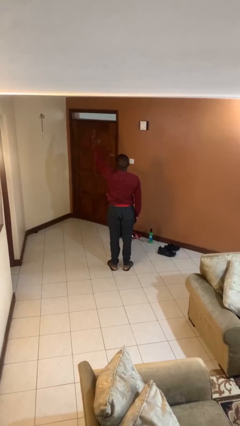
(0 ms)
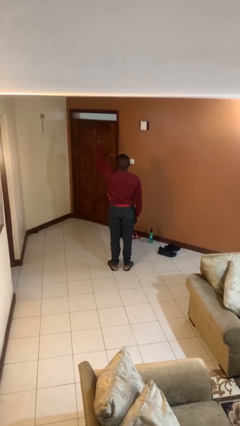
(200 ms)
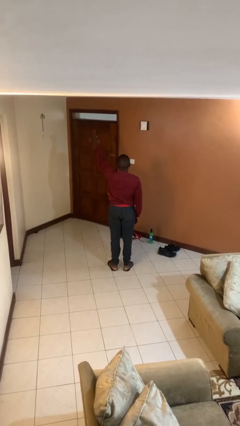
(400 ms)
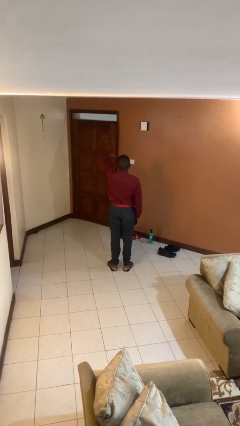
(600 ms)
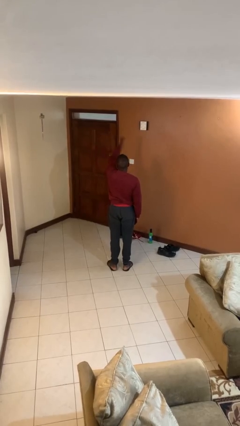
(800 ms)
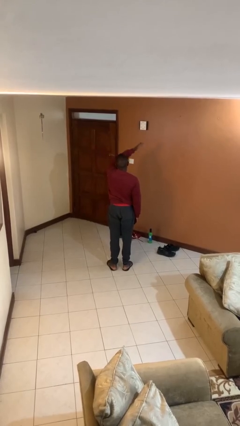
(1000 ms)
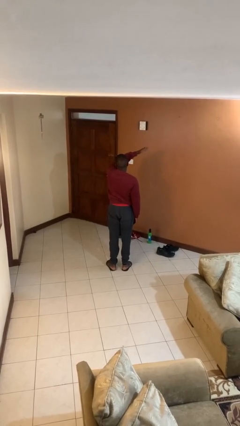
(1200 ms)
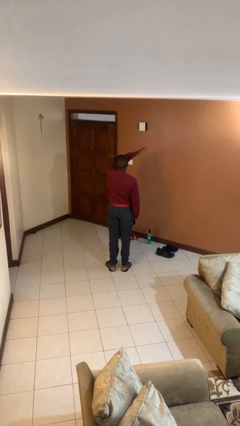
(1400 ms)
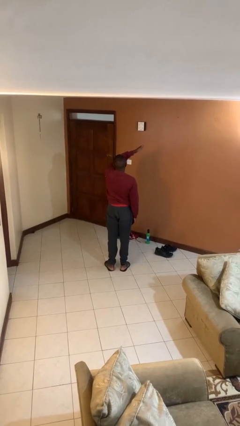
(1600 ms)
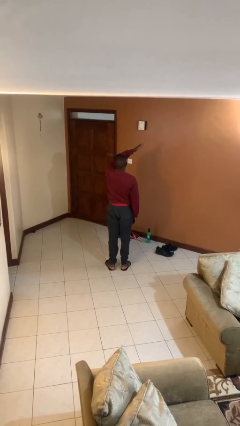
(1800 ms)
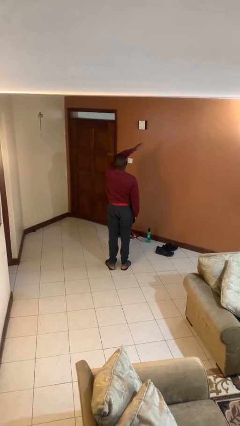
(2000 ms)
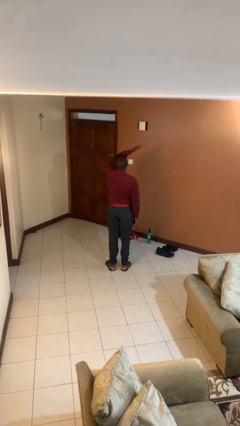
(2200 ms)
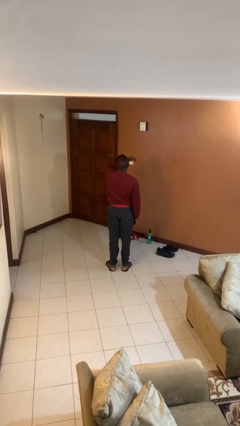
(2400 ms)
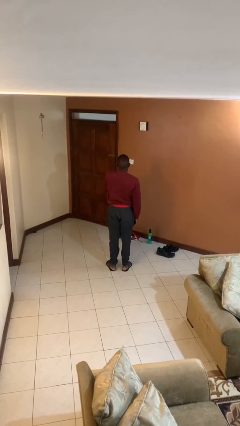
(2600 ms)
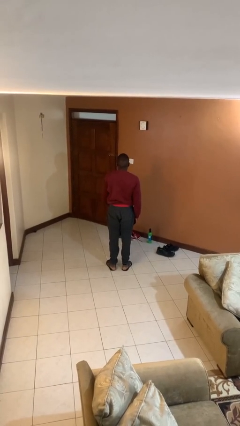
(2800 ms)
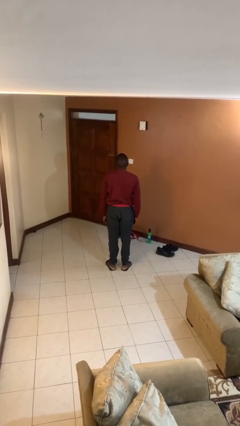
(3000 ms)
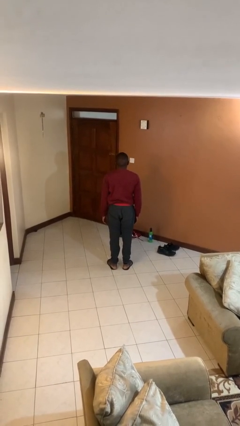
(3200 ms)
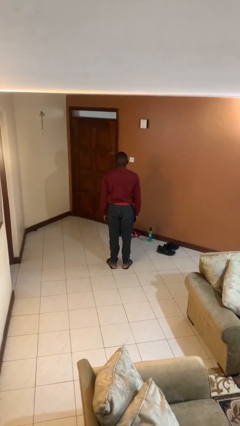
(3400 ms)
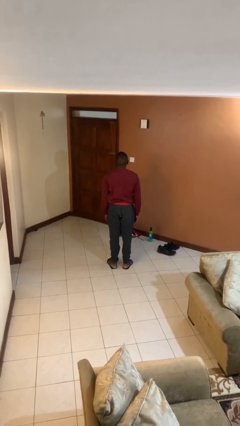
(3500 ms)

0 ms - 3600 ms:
person gestures swipe right

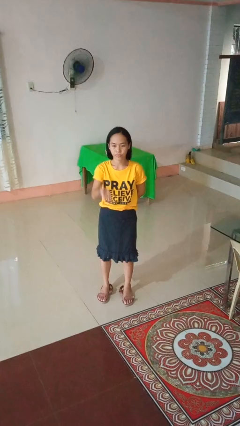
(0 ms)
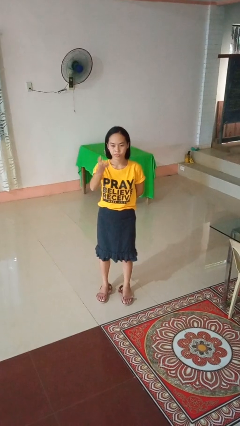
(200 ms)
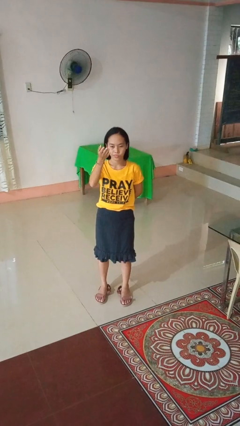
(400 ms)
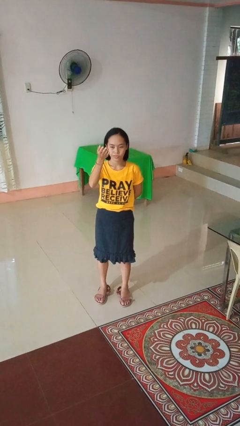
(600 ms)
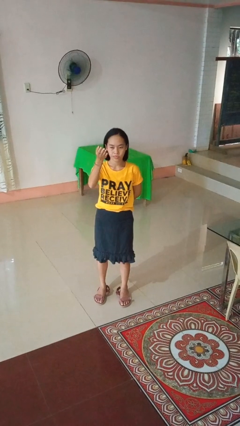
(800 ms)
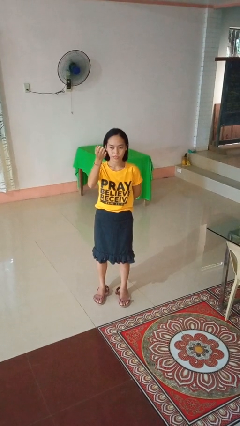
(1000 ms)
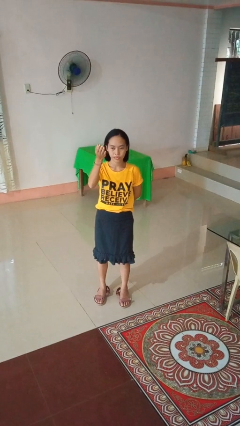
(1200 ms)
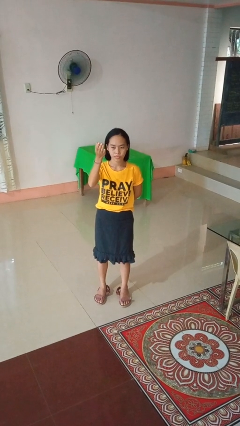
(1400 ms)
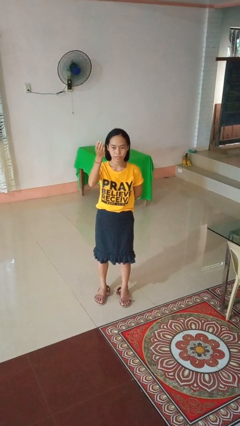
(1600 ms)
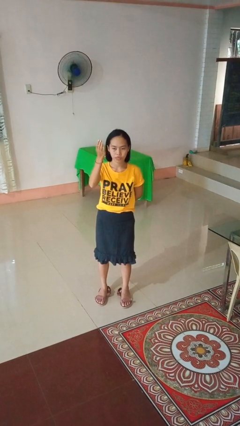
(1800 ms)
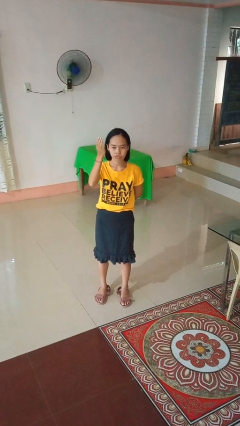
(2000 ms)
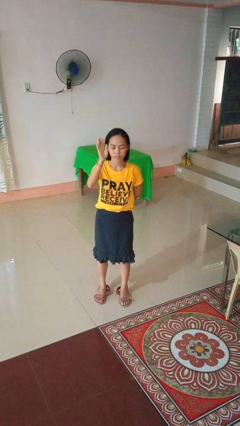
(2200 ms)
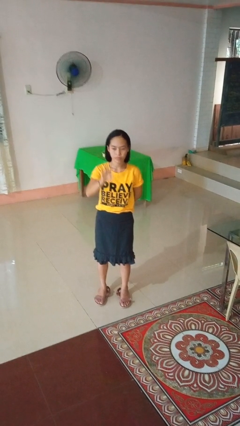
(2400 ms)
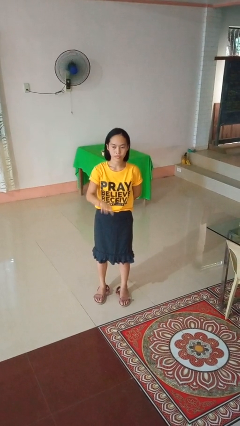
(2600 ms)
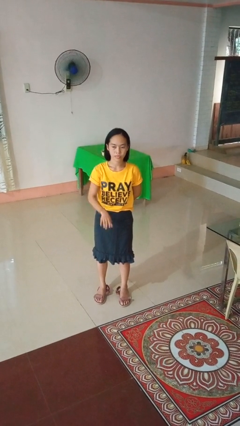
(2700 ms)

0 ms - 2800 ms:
person gestures swipe up

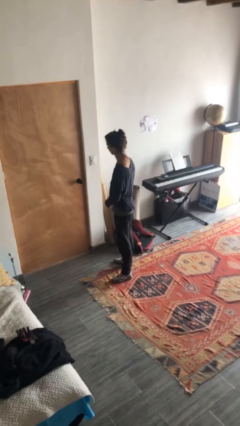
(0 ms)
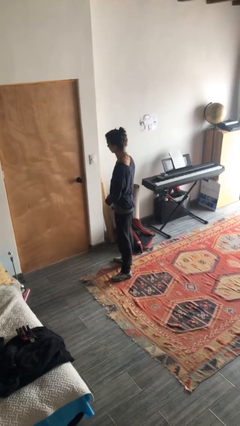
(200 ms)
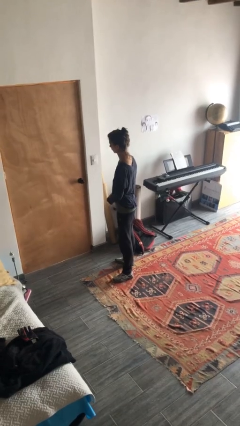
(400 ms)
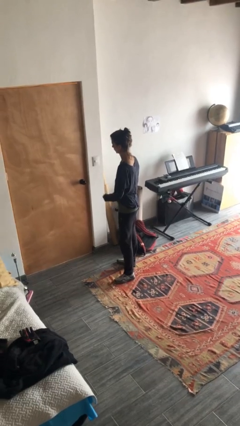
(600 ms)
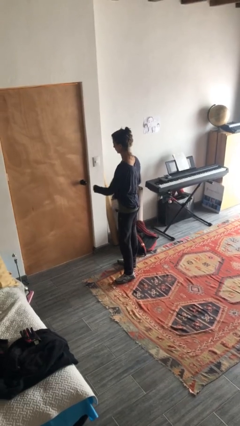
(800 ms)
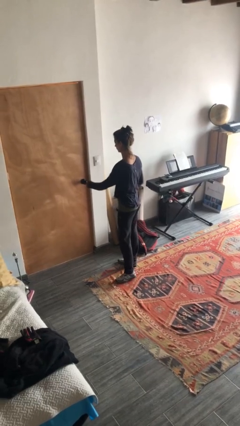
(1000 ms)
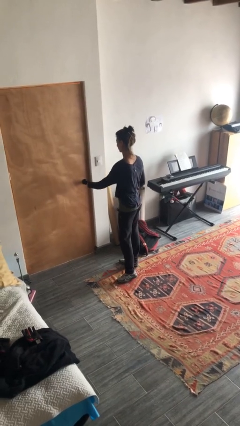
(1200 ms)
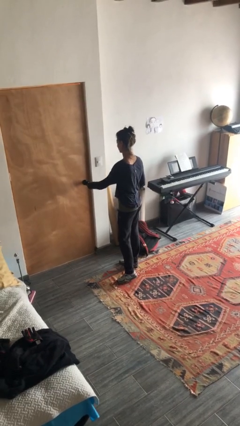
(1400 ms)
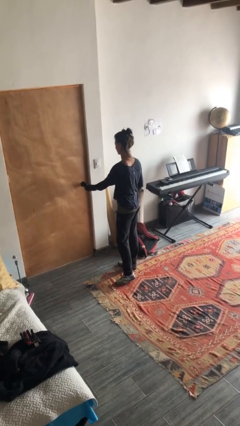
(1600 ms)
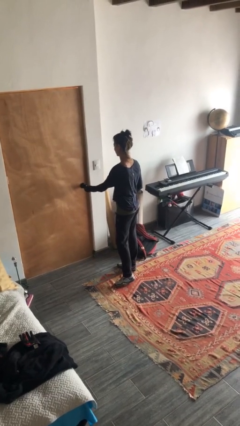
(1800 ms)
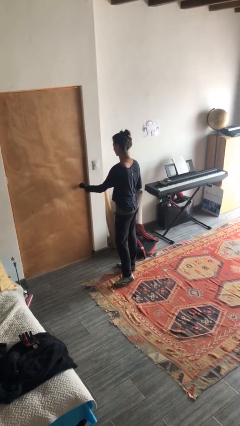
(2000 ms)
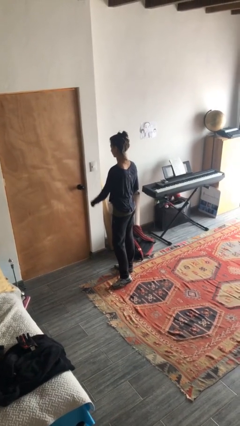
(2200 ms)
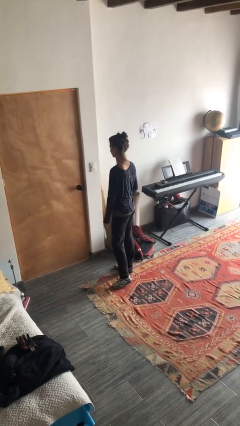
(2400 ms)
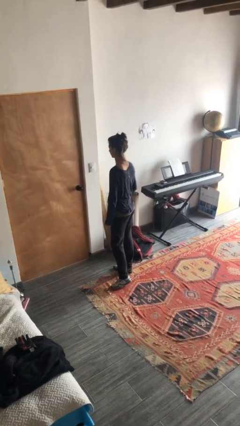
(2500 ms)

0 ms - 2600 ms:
person unlocks door with keys

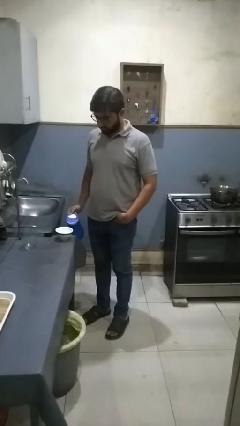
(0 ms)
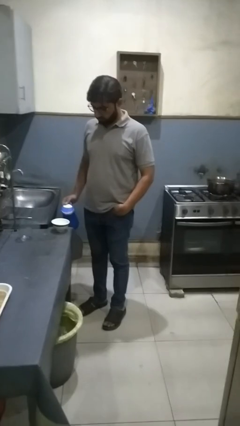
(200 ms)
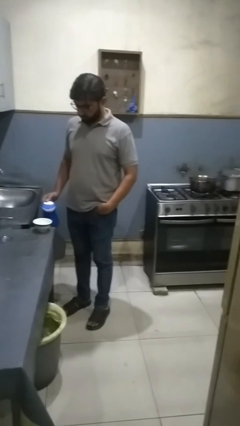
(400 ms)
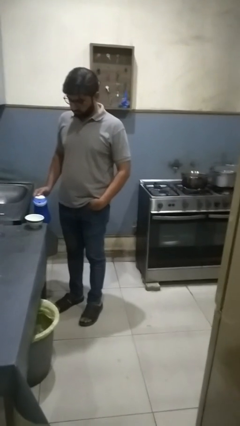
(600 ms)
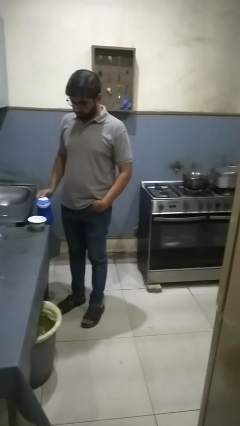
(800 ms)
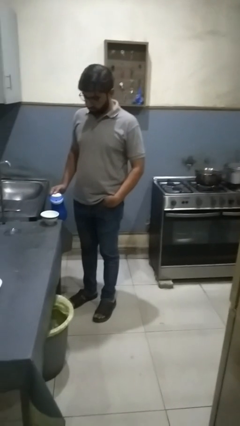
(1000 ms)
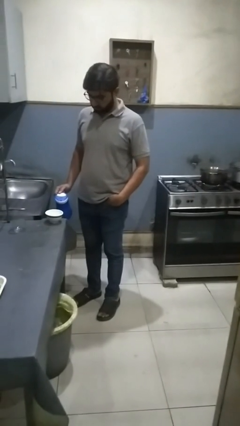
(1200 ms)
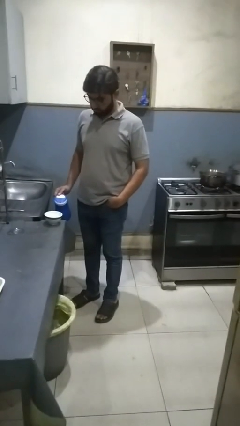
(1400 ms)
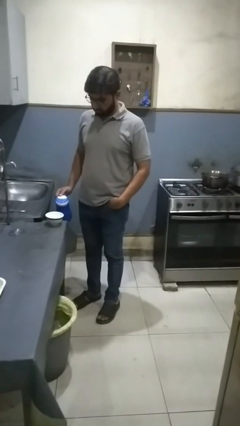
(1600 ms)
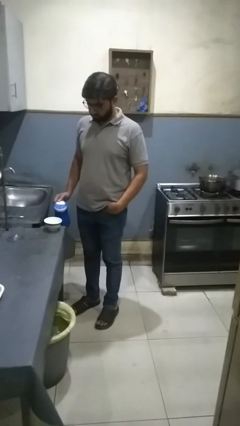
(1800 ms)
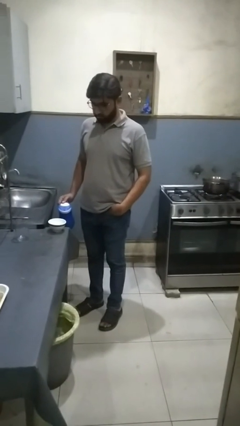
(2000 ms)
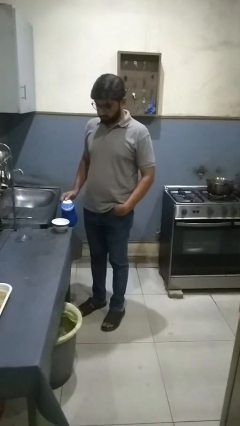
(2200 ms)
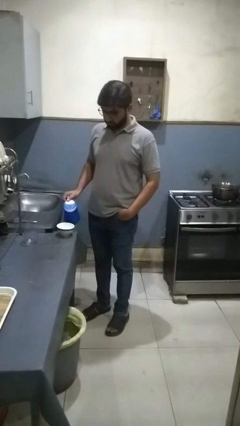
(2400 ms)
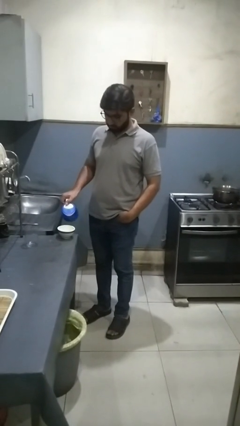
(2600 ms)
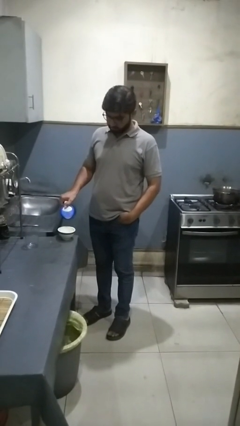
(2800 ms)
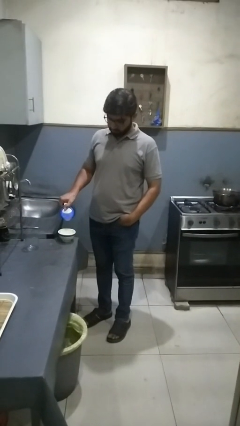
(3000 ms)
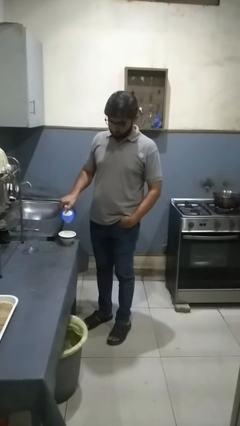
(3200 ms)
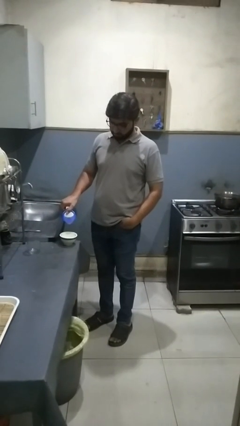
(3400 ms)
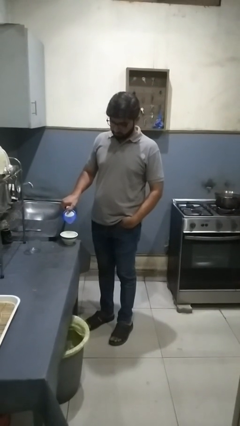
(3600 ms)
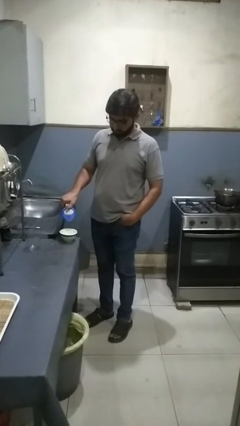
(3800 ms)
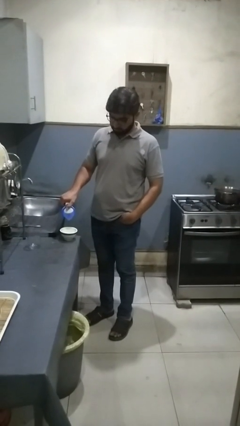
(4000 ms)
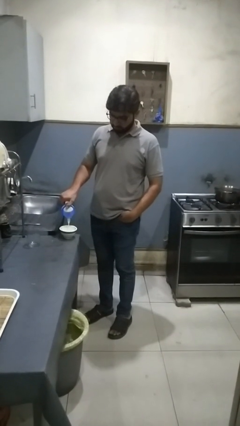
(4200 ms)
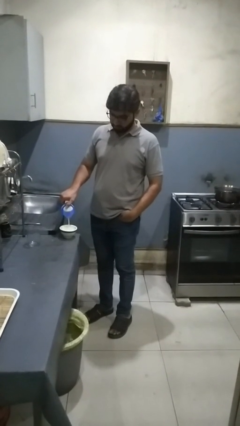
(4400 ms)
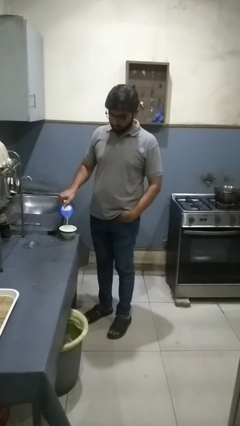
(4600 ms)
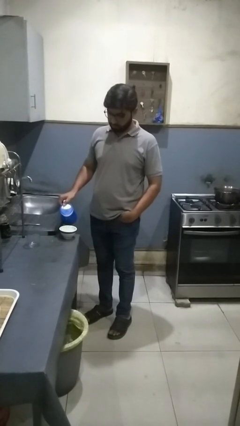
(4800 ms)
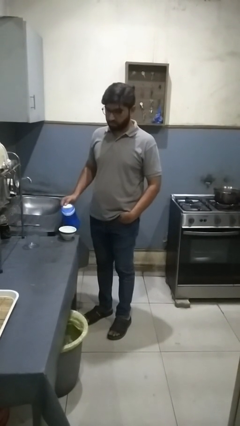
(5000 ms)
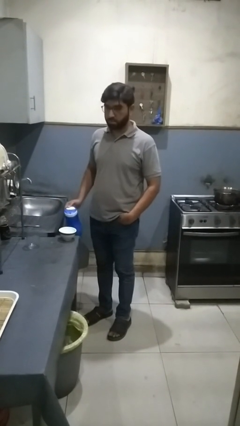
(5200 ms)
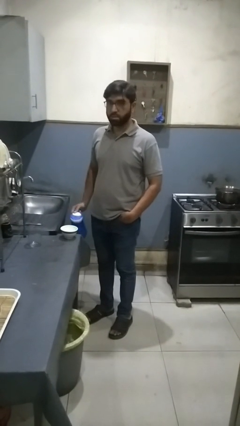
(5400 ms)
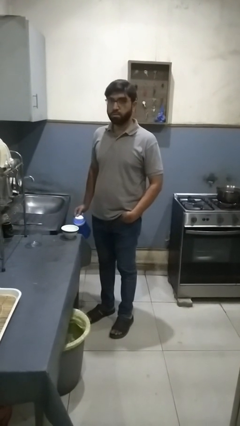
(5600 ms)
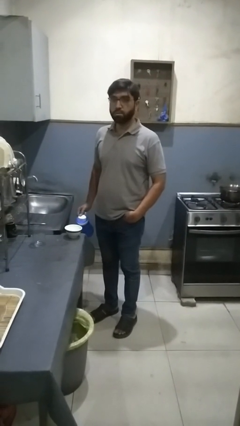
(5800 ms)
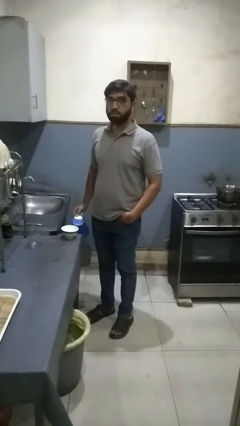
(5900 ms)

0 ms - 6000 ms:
person pours into bowl

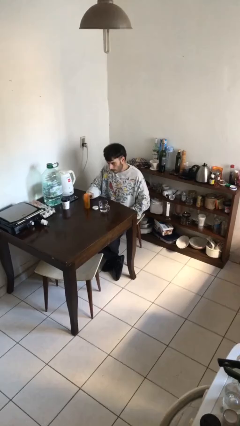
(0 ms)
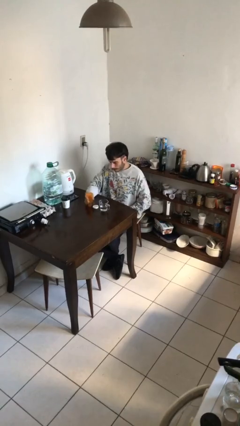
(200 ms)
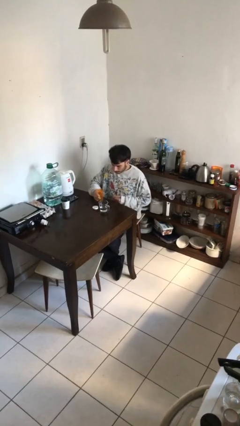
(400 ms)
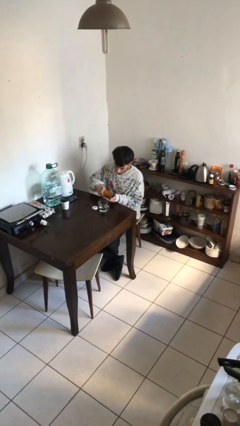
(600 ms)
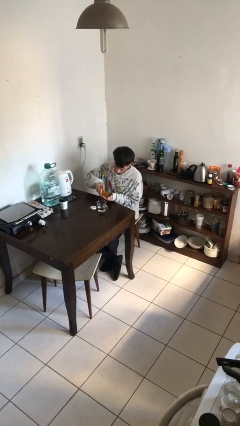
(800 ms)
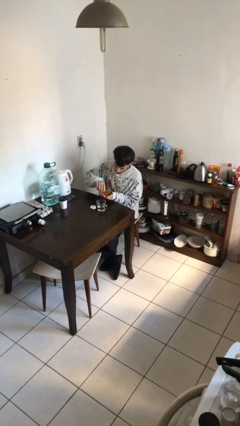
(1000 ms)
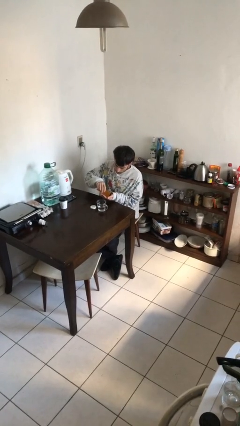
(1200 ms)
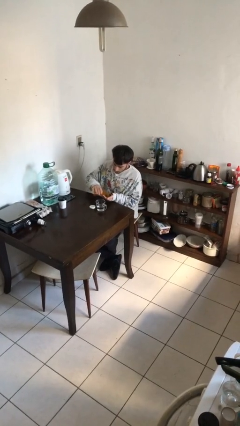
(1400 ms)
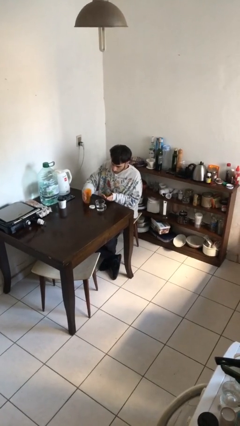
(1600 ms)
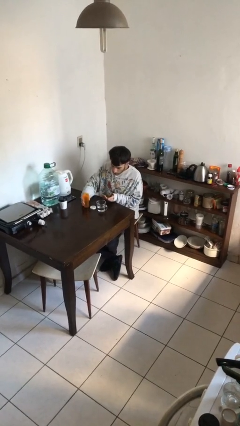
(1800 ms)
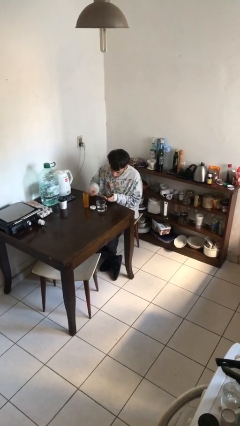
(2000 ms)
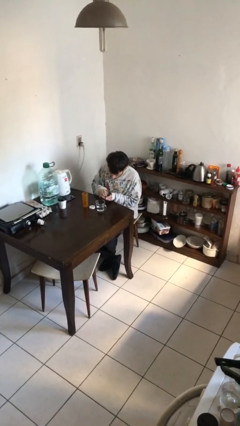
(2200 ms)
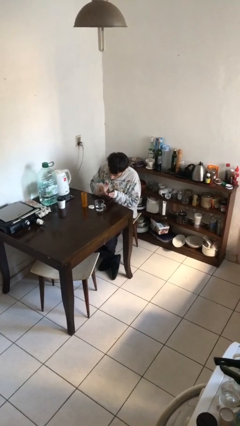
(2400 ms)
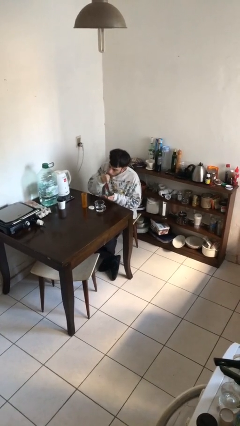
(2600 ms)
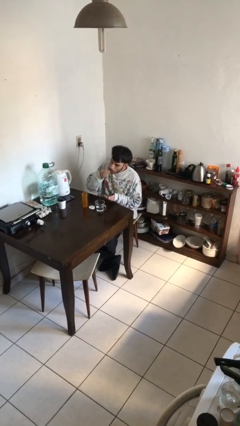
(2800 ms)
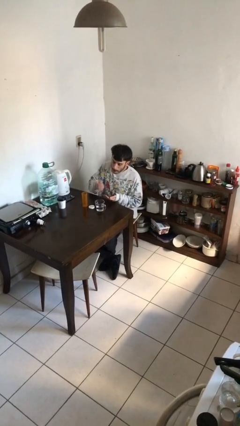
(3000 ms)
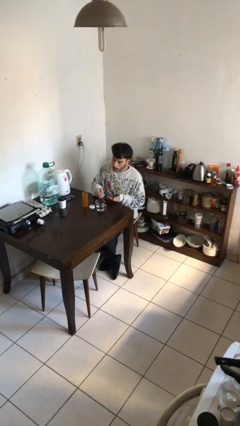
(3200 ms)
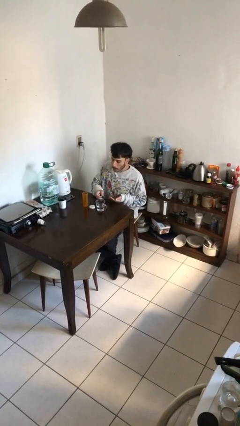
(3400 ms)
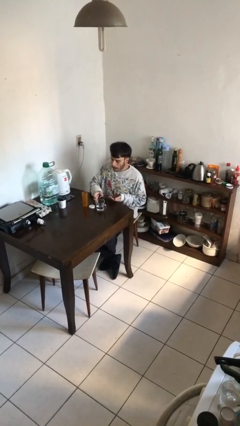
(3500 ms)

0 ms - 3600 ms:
person takes medicine pills
